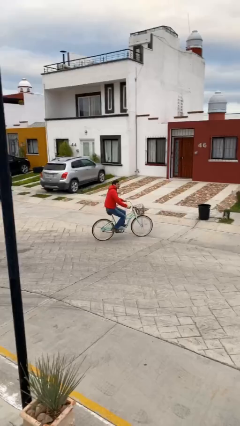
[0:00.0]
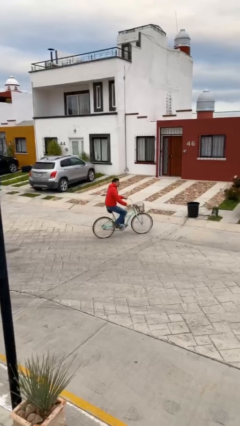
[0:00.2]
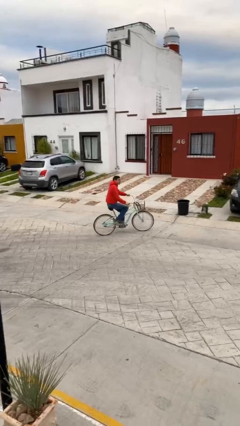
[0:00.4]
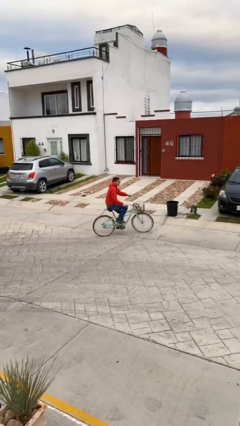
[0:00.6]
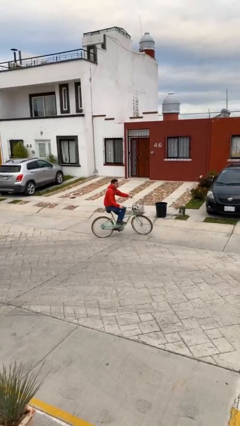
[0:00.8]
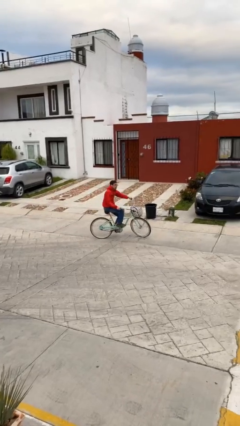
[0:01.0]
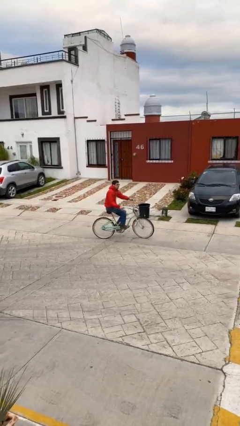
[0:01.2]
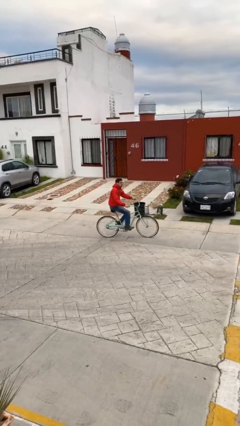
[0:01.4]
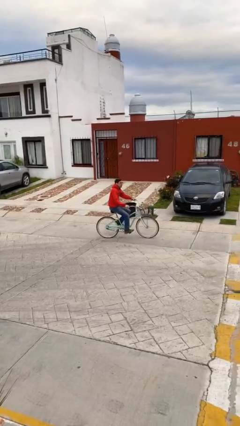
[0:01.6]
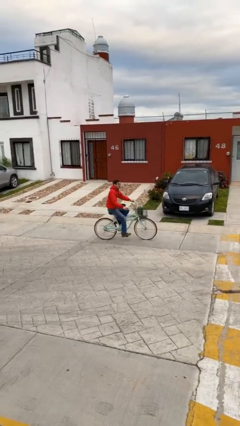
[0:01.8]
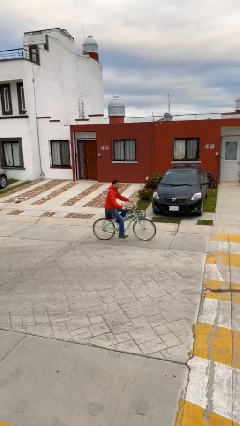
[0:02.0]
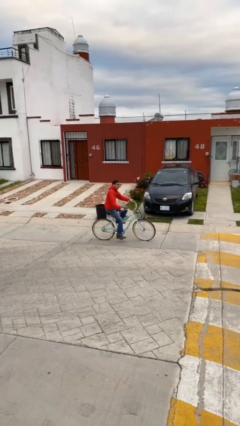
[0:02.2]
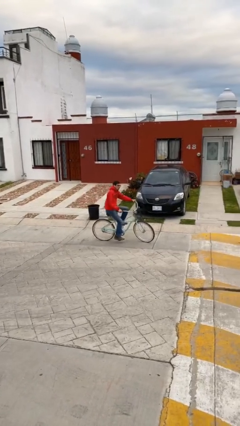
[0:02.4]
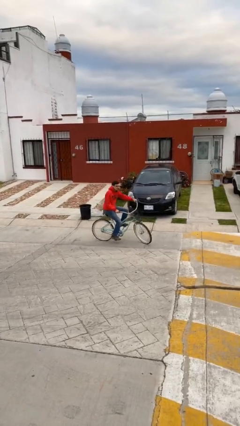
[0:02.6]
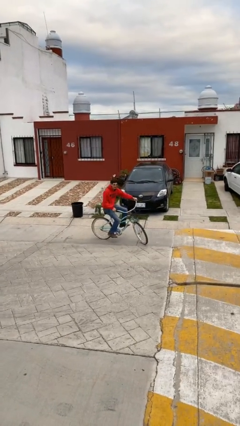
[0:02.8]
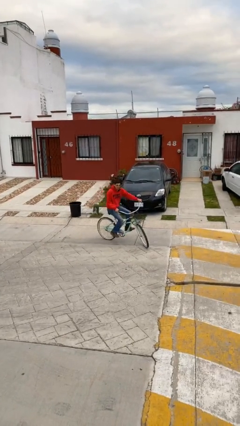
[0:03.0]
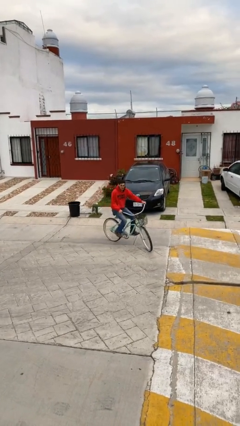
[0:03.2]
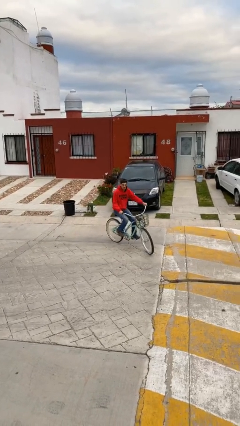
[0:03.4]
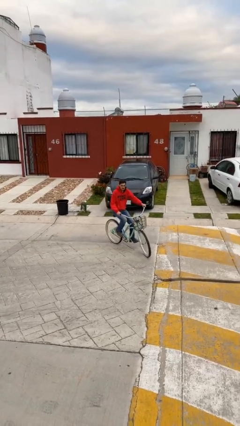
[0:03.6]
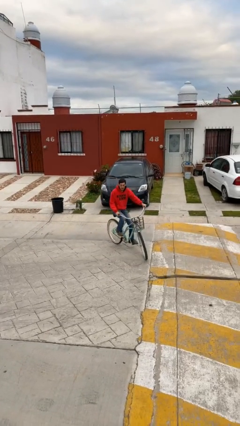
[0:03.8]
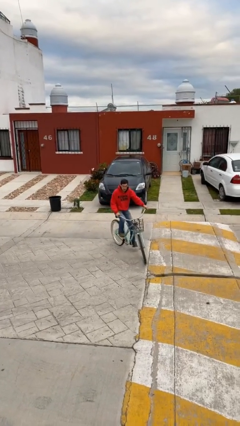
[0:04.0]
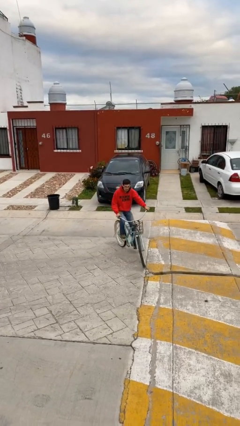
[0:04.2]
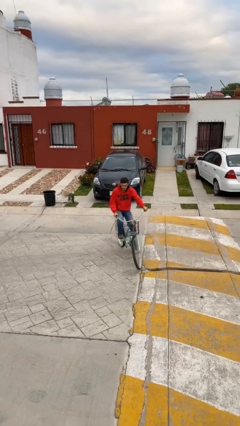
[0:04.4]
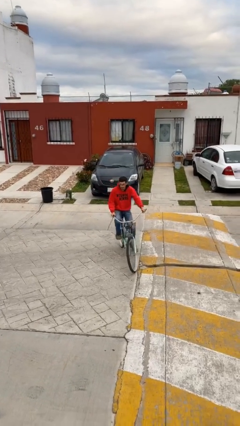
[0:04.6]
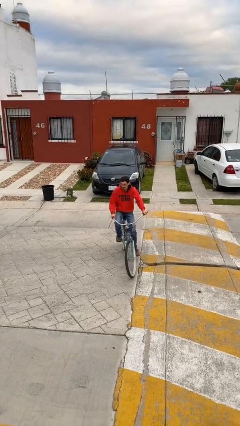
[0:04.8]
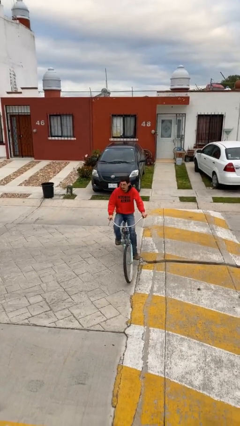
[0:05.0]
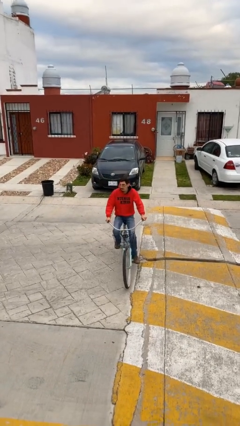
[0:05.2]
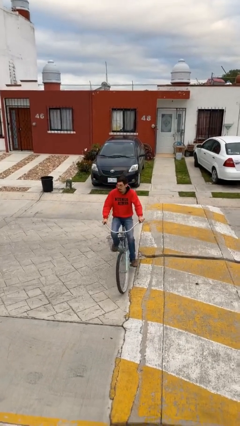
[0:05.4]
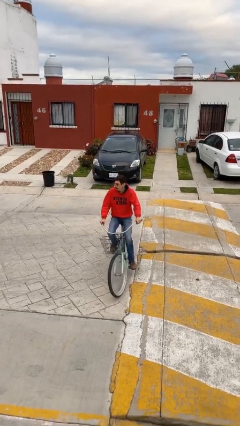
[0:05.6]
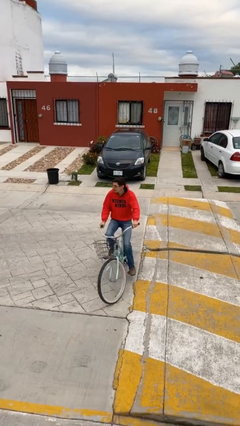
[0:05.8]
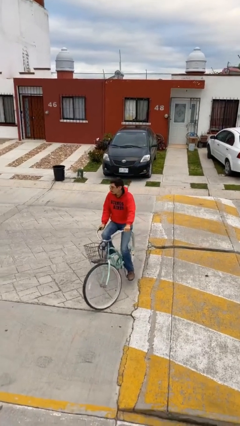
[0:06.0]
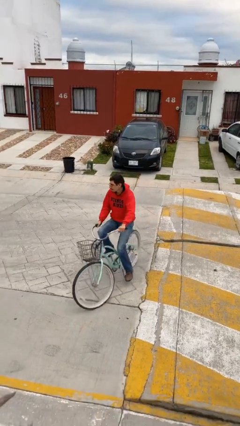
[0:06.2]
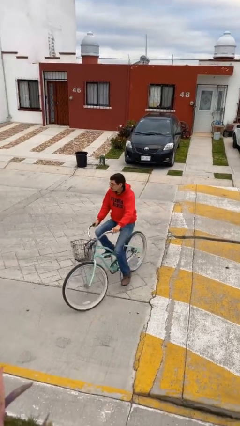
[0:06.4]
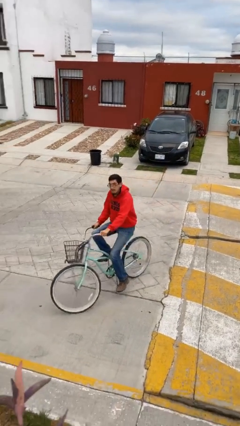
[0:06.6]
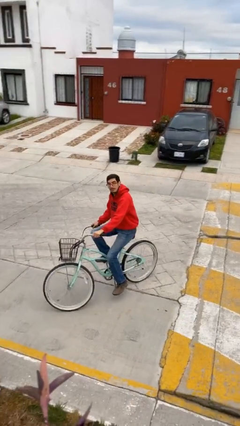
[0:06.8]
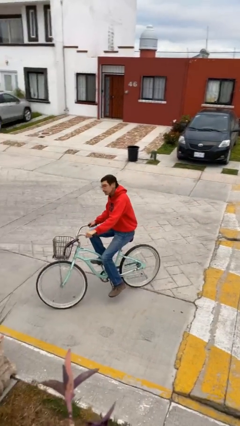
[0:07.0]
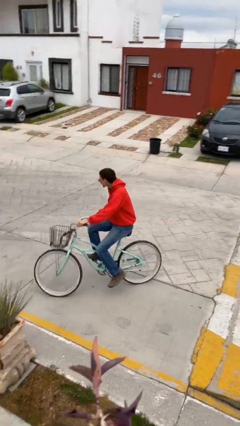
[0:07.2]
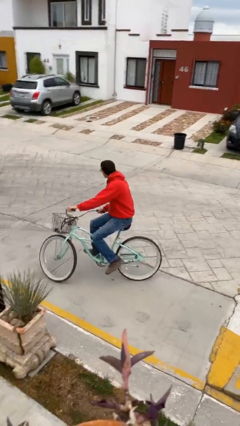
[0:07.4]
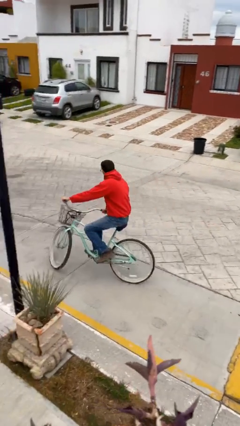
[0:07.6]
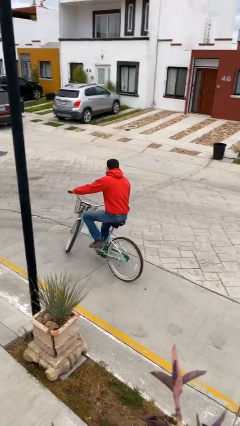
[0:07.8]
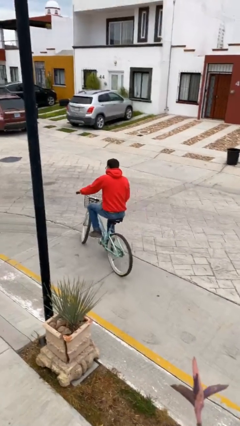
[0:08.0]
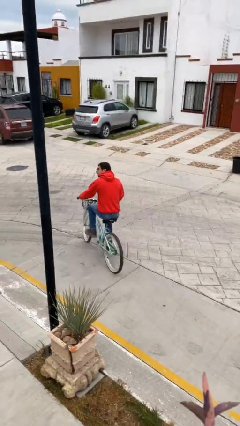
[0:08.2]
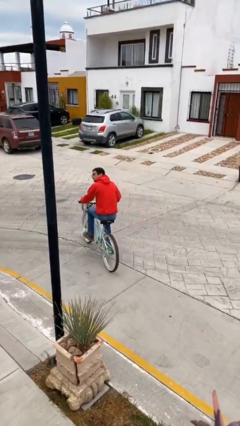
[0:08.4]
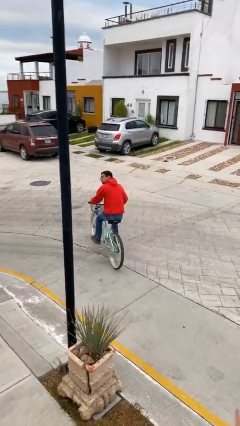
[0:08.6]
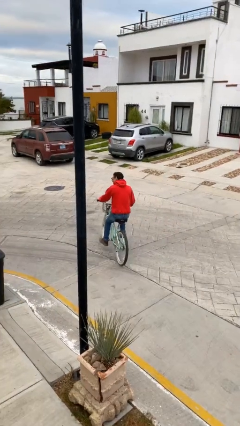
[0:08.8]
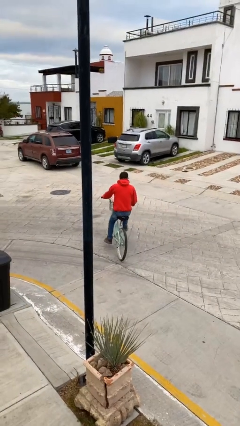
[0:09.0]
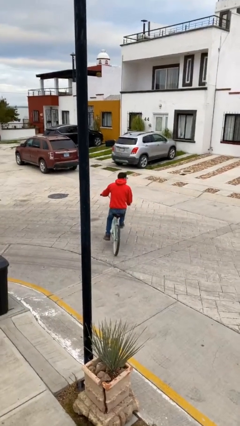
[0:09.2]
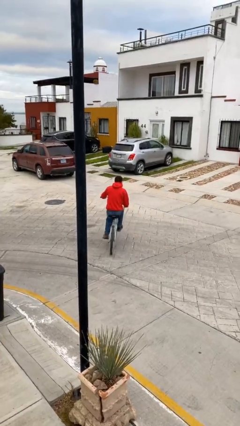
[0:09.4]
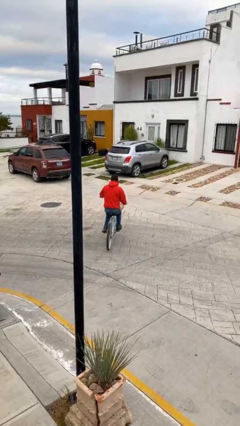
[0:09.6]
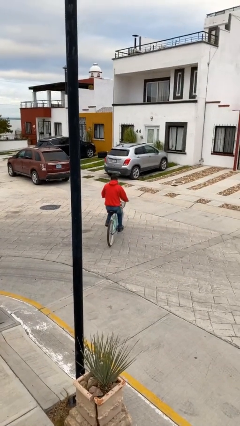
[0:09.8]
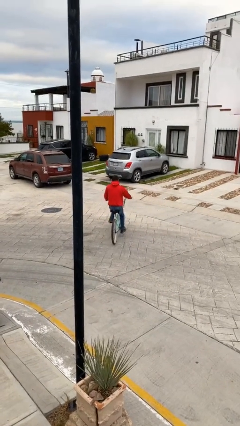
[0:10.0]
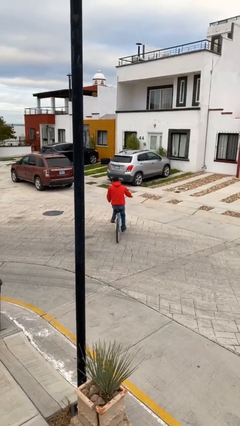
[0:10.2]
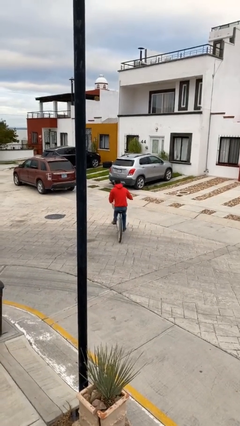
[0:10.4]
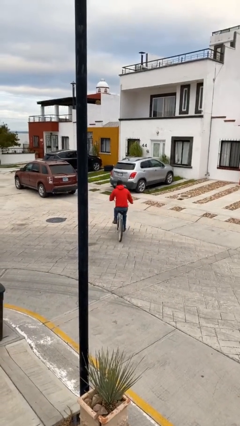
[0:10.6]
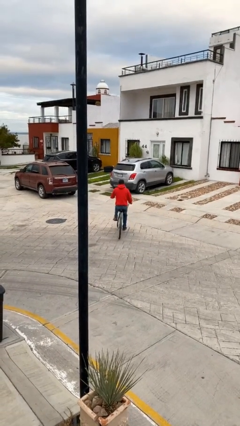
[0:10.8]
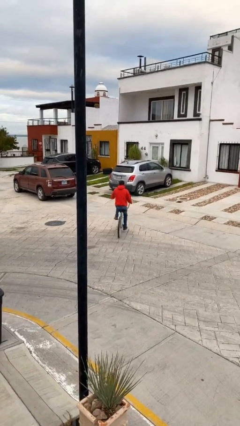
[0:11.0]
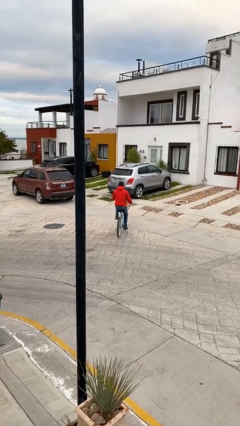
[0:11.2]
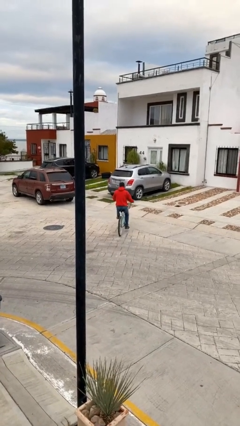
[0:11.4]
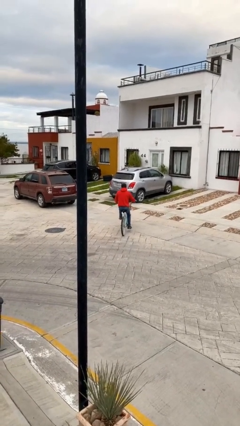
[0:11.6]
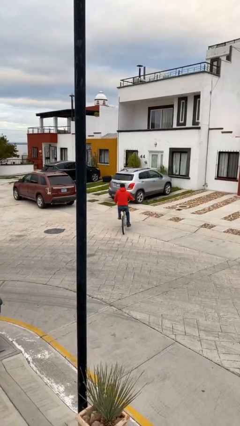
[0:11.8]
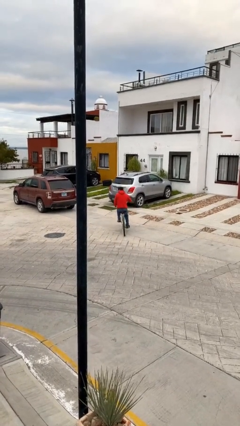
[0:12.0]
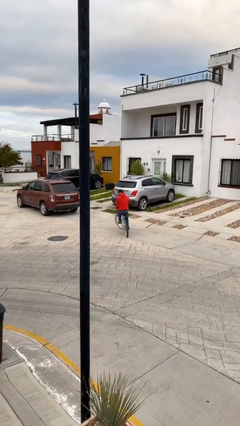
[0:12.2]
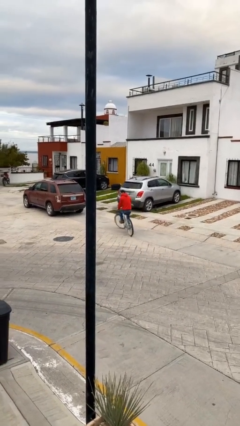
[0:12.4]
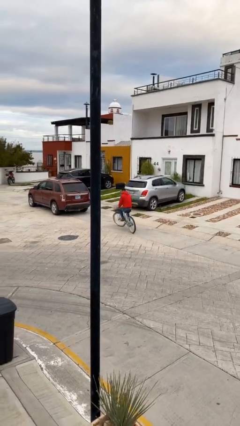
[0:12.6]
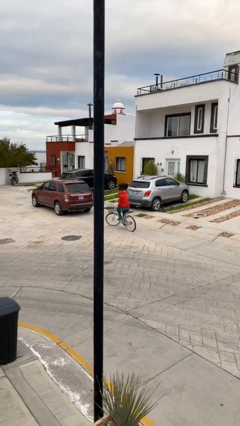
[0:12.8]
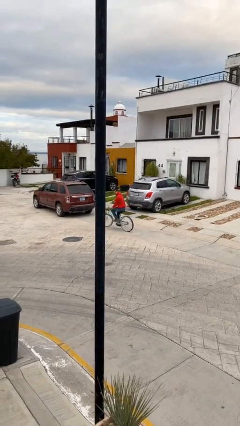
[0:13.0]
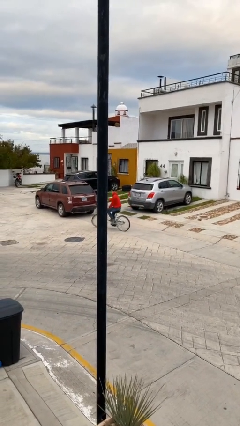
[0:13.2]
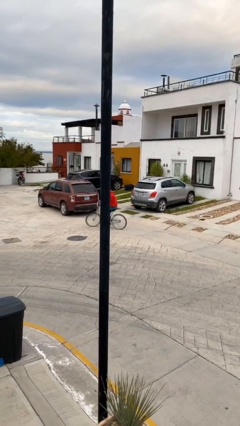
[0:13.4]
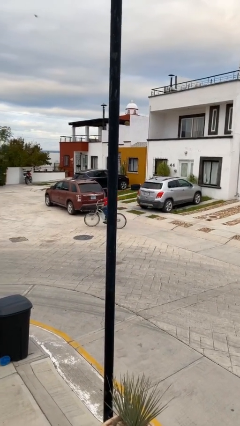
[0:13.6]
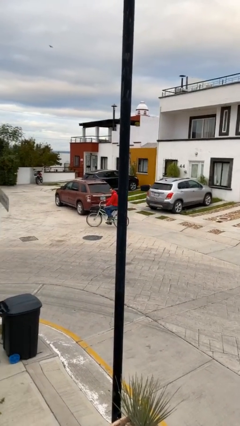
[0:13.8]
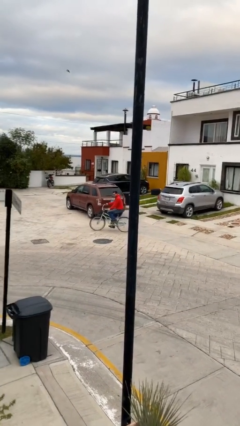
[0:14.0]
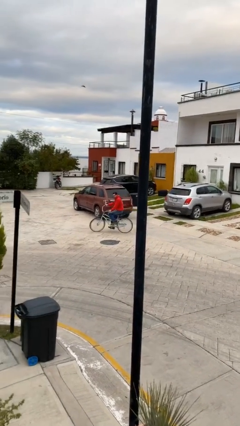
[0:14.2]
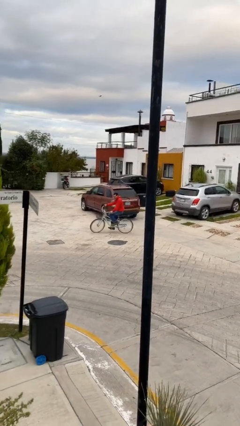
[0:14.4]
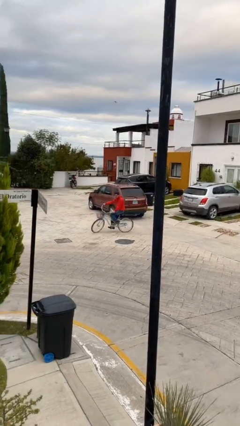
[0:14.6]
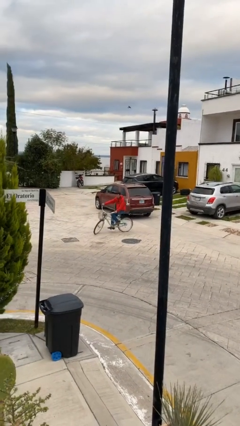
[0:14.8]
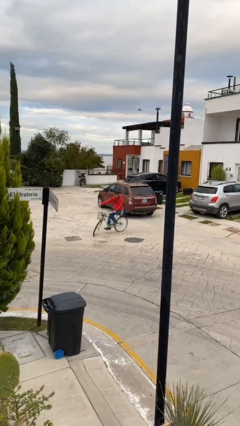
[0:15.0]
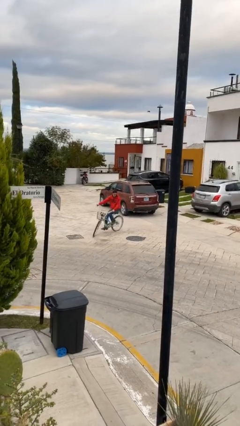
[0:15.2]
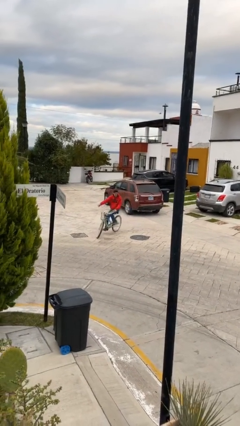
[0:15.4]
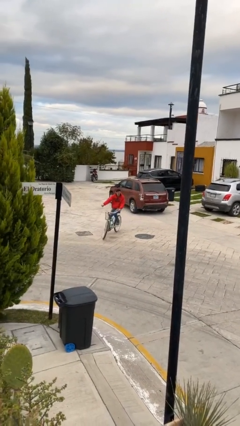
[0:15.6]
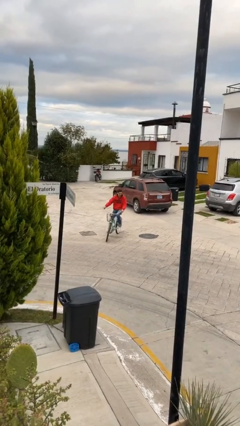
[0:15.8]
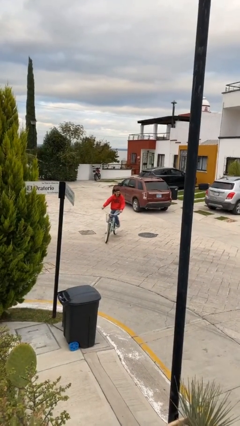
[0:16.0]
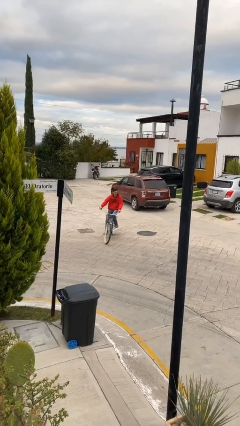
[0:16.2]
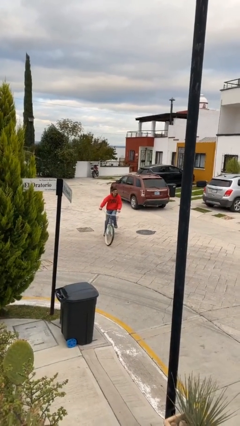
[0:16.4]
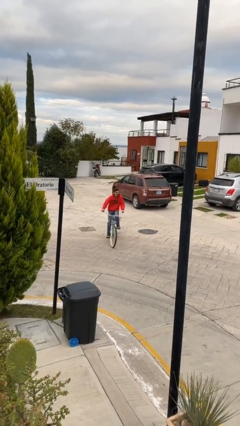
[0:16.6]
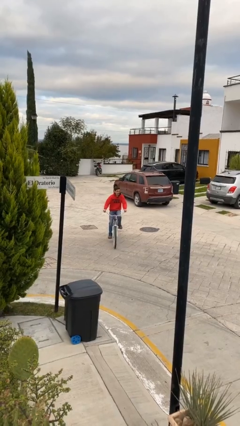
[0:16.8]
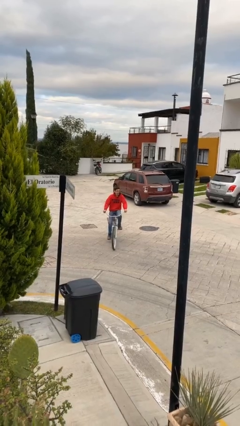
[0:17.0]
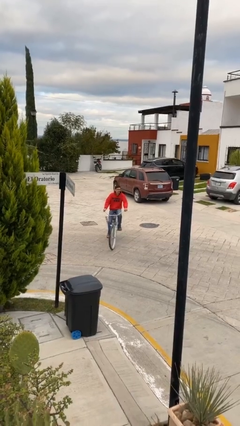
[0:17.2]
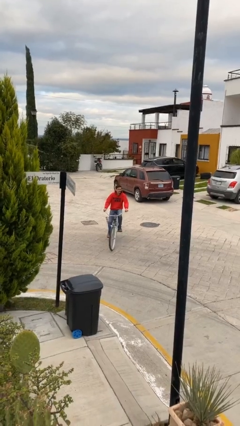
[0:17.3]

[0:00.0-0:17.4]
person rides bicycle

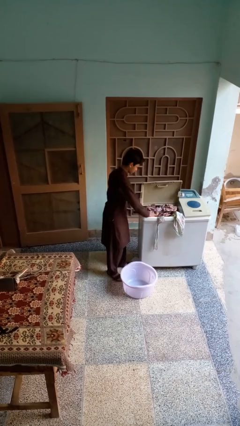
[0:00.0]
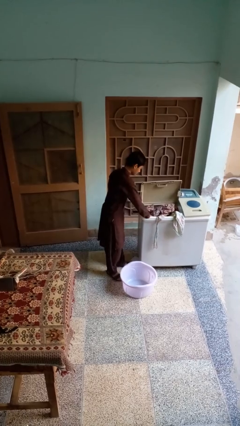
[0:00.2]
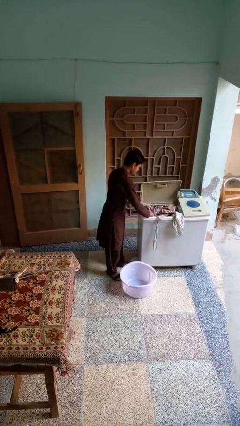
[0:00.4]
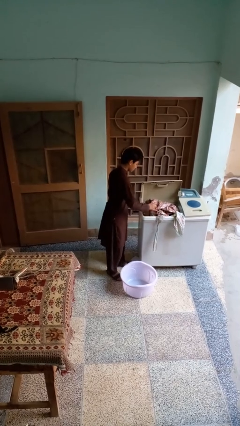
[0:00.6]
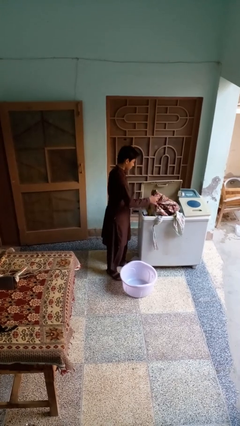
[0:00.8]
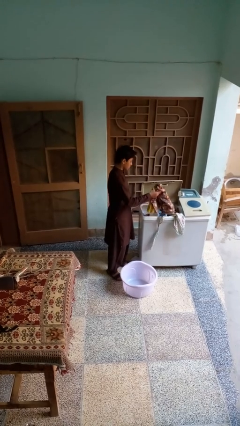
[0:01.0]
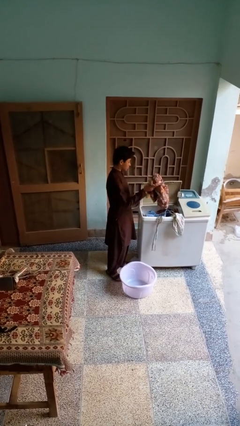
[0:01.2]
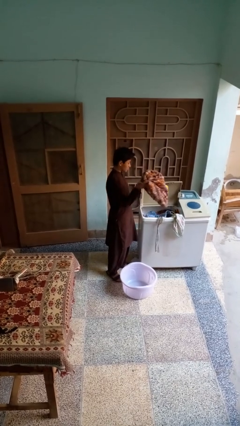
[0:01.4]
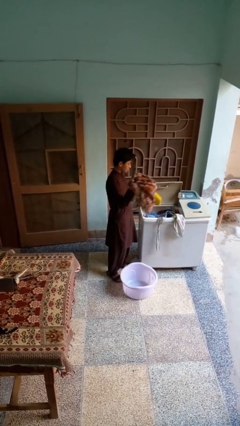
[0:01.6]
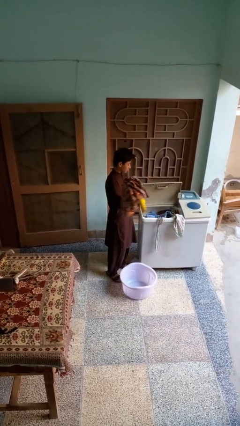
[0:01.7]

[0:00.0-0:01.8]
person loads clotheswasher
